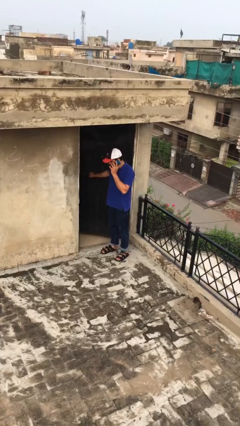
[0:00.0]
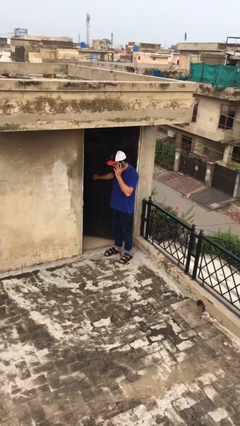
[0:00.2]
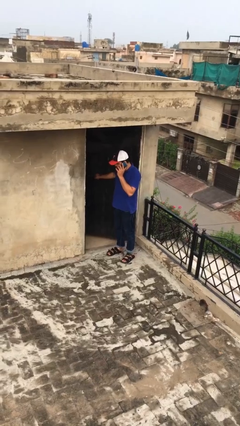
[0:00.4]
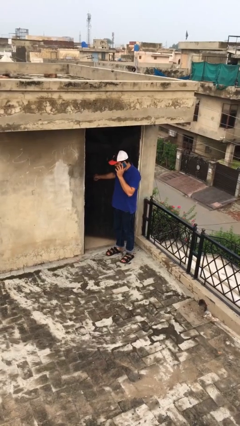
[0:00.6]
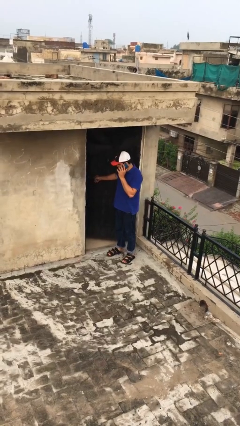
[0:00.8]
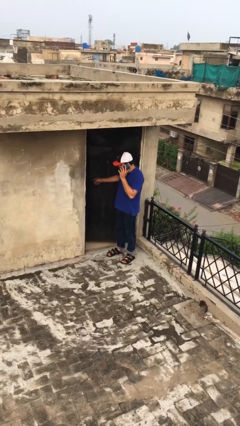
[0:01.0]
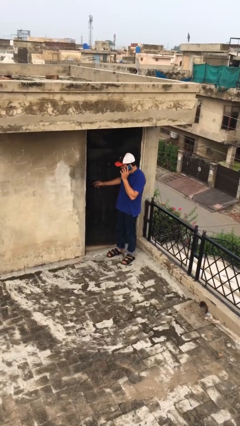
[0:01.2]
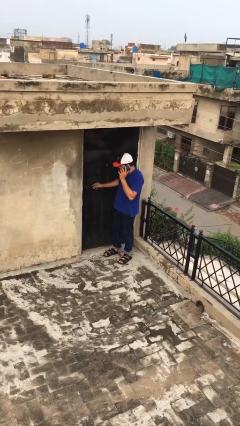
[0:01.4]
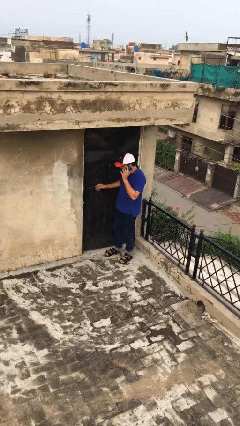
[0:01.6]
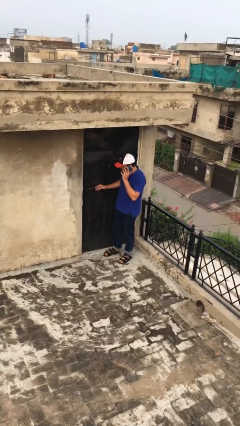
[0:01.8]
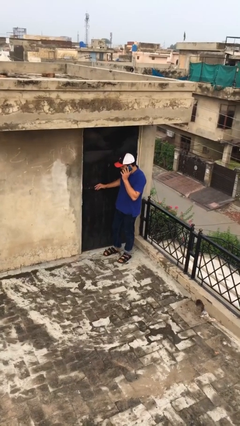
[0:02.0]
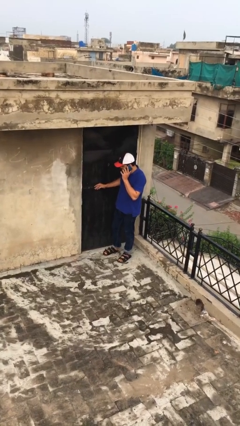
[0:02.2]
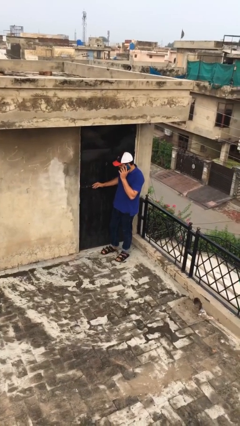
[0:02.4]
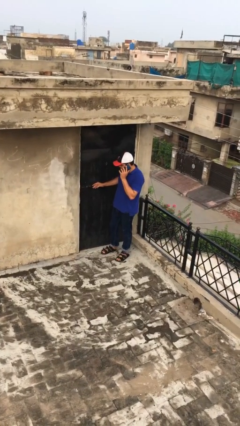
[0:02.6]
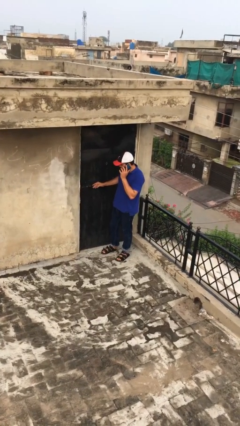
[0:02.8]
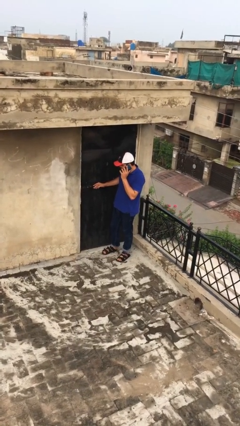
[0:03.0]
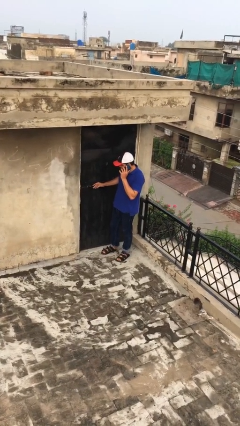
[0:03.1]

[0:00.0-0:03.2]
person closes facility door

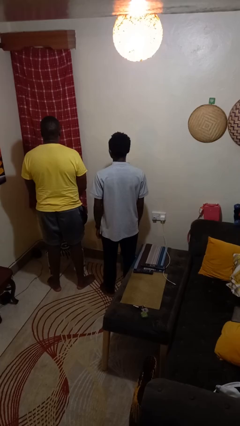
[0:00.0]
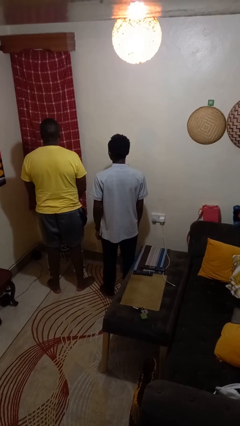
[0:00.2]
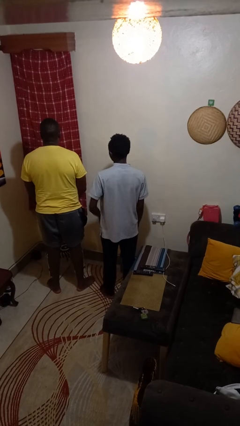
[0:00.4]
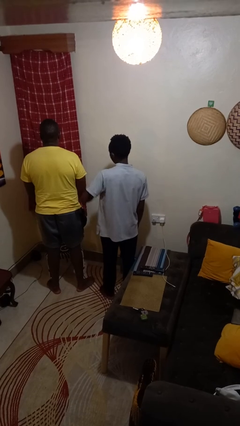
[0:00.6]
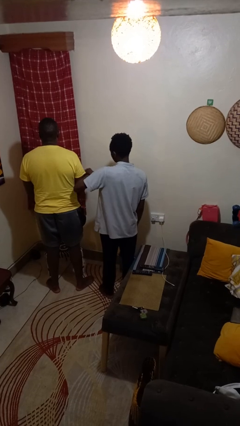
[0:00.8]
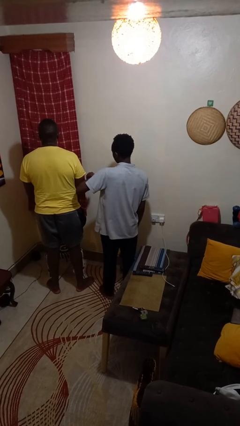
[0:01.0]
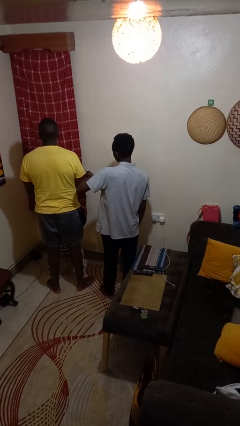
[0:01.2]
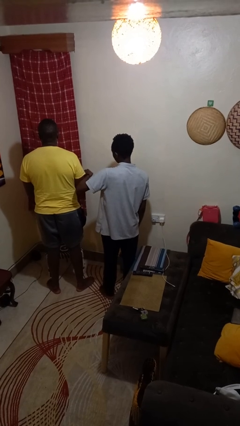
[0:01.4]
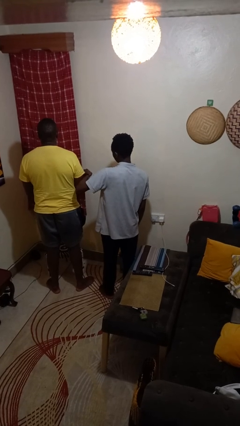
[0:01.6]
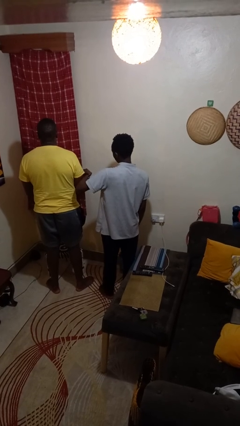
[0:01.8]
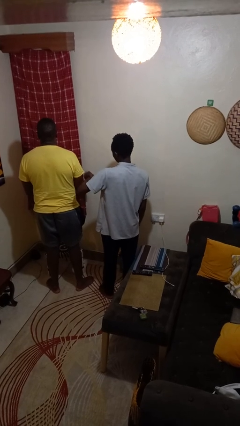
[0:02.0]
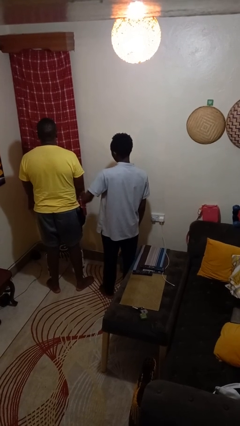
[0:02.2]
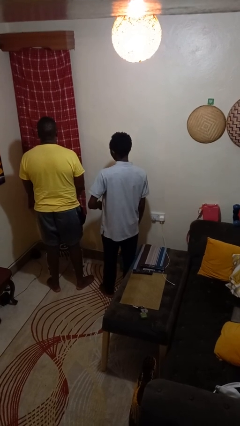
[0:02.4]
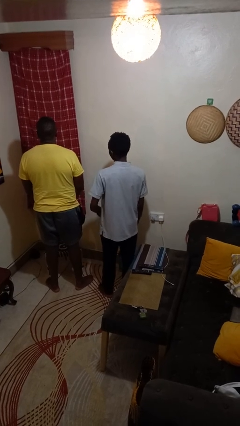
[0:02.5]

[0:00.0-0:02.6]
person nudges person with elbow

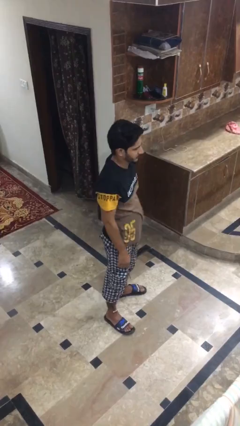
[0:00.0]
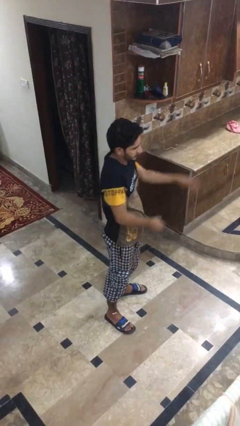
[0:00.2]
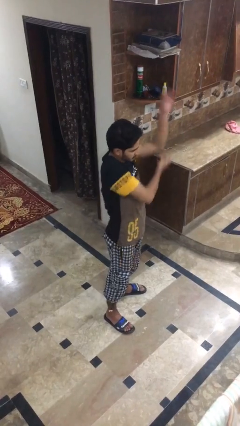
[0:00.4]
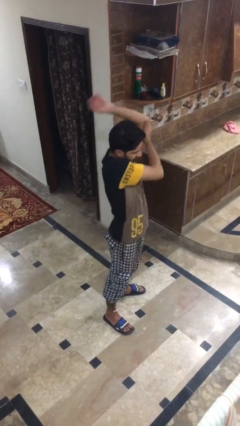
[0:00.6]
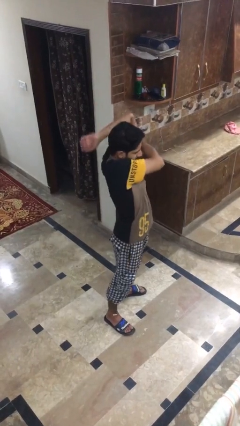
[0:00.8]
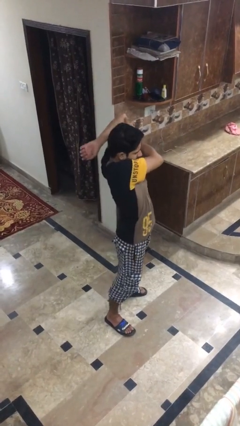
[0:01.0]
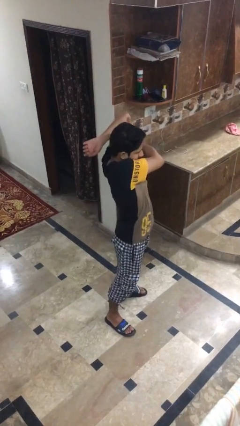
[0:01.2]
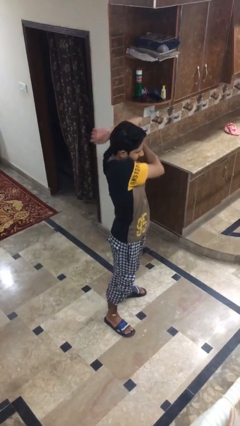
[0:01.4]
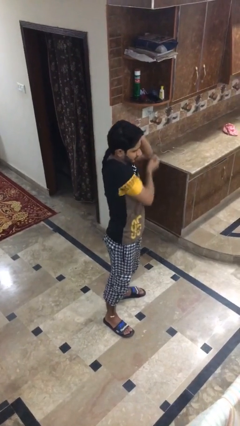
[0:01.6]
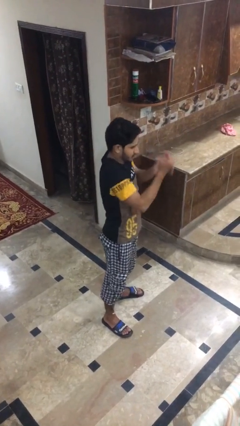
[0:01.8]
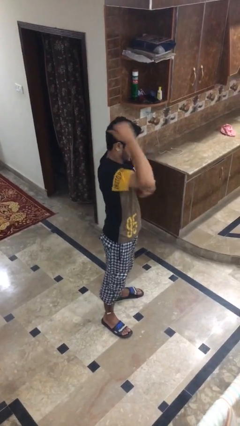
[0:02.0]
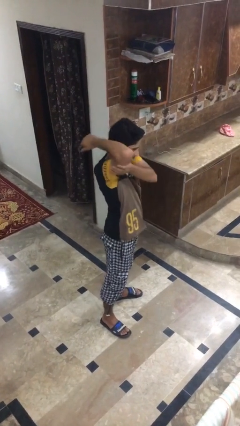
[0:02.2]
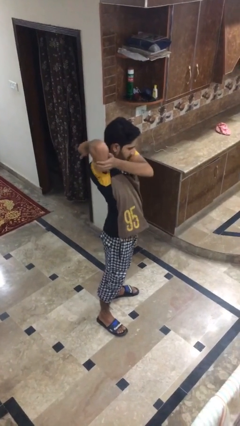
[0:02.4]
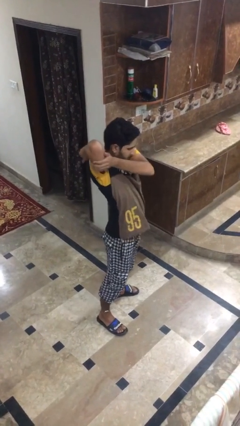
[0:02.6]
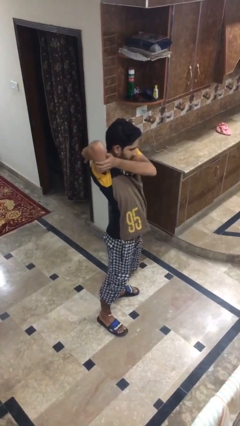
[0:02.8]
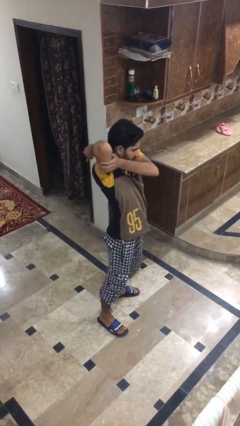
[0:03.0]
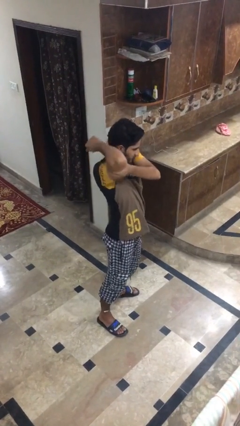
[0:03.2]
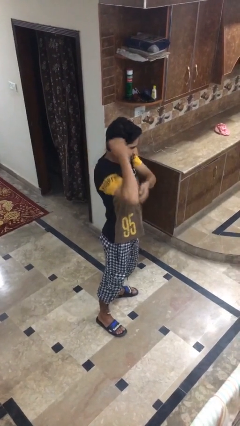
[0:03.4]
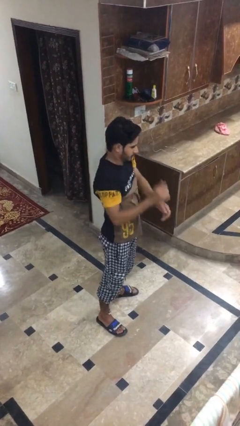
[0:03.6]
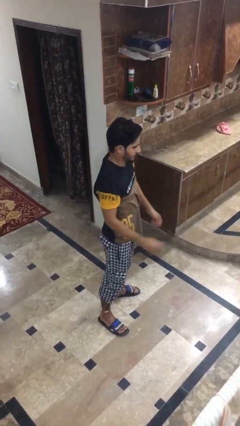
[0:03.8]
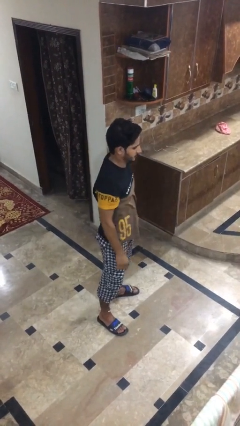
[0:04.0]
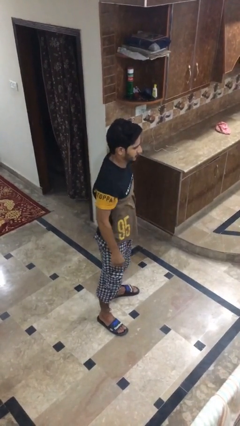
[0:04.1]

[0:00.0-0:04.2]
person stretches arms to side

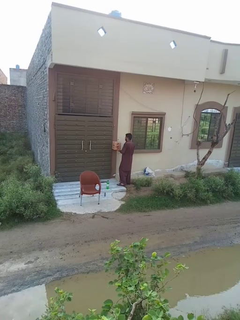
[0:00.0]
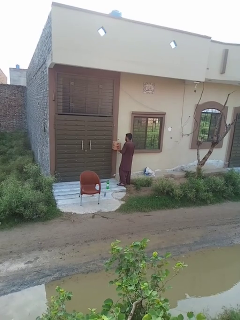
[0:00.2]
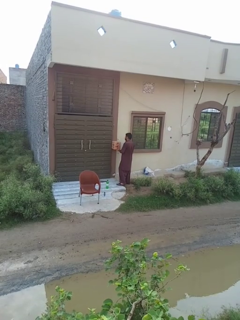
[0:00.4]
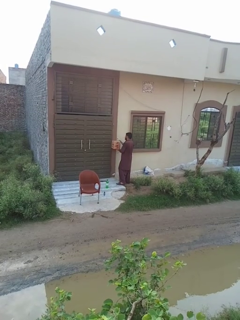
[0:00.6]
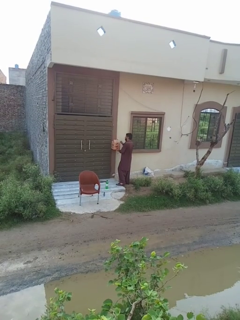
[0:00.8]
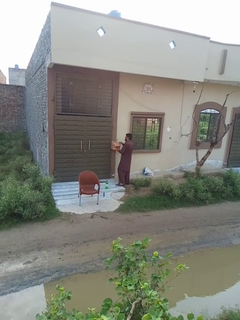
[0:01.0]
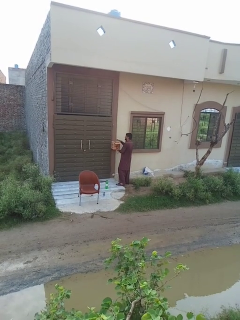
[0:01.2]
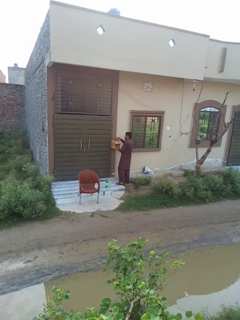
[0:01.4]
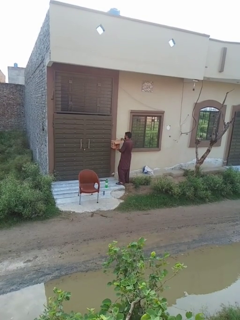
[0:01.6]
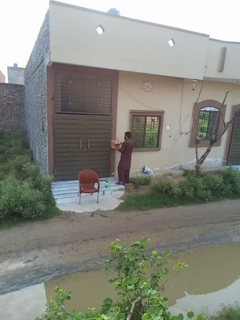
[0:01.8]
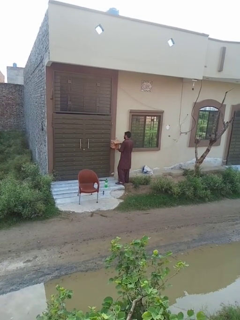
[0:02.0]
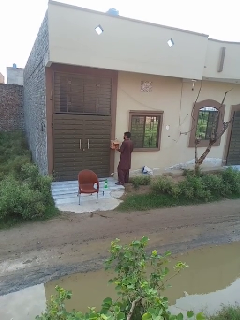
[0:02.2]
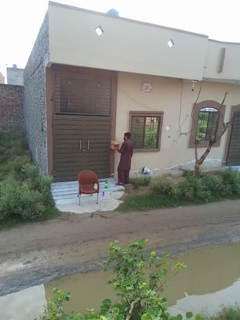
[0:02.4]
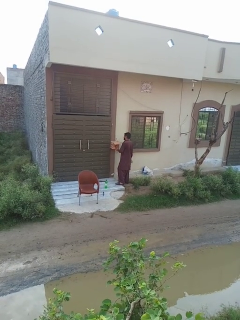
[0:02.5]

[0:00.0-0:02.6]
person opens mailbox

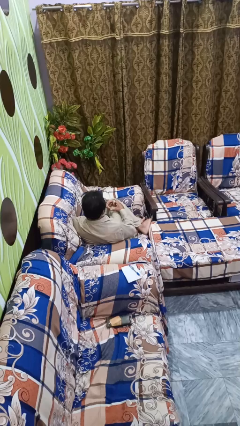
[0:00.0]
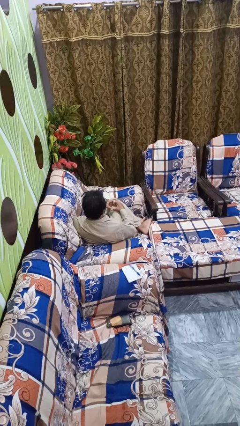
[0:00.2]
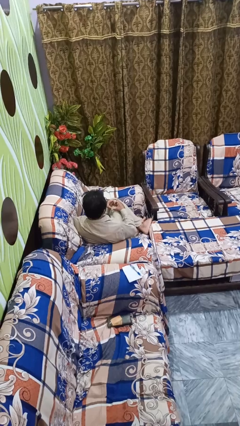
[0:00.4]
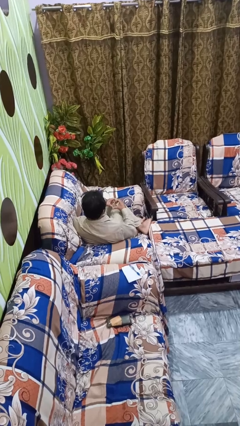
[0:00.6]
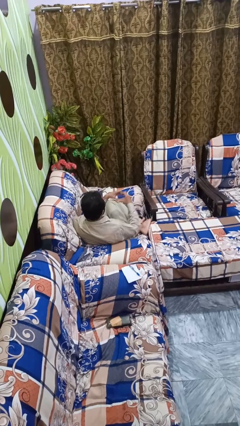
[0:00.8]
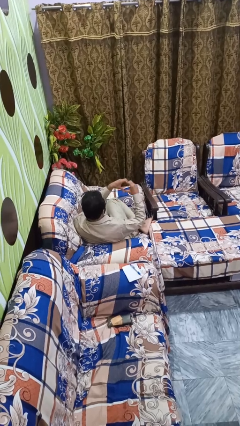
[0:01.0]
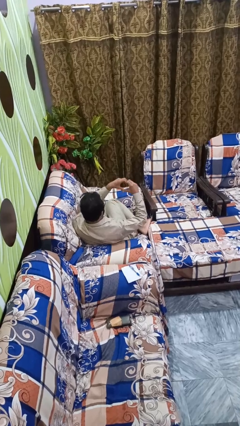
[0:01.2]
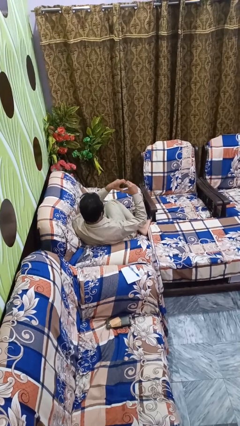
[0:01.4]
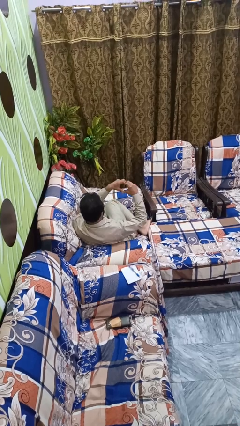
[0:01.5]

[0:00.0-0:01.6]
person gestures heart

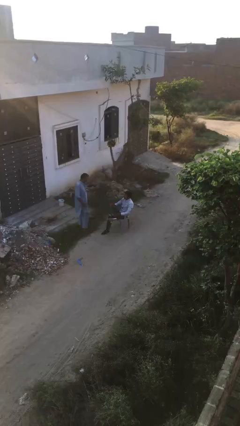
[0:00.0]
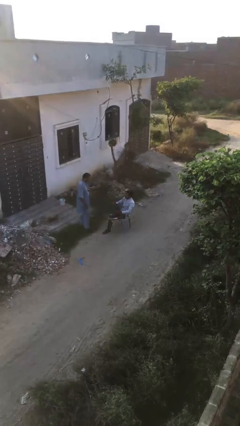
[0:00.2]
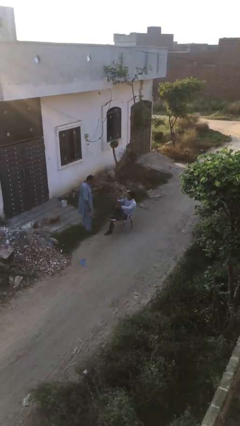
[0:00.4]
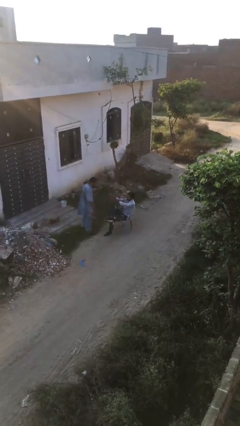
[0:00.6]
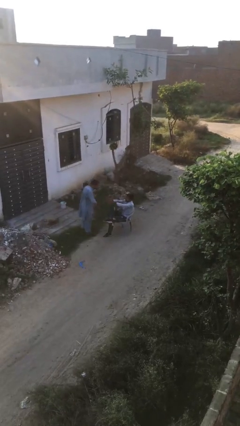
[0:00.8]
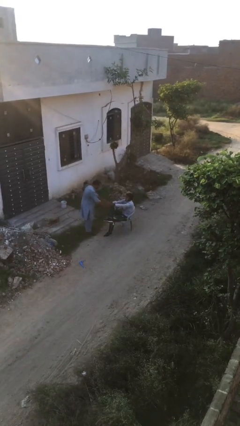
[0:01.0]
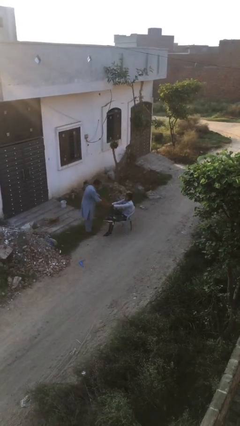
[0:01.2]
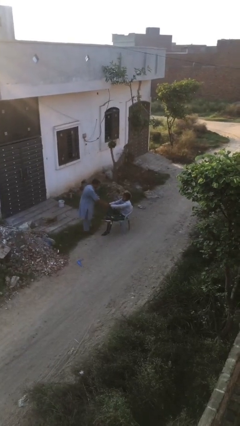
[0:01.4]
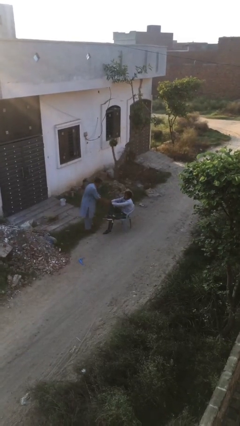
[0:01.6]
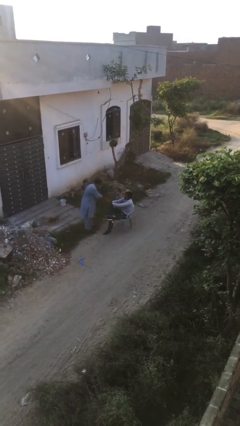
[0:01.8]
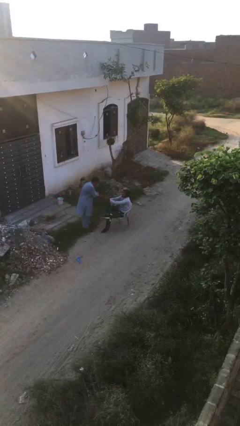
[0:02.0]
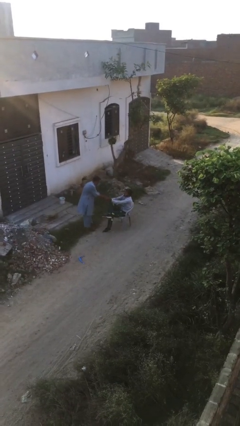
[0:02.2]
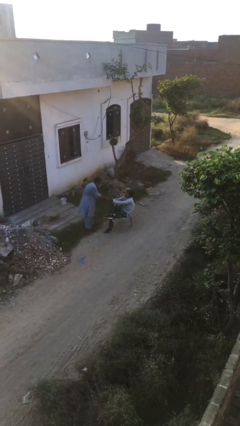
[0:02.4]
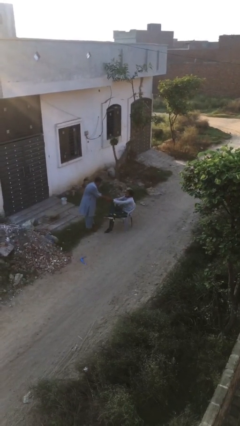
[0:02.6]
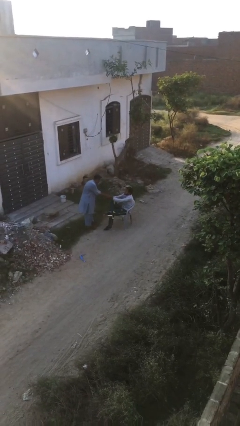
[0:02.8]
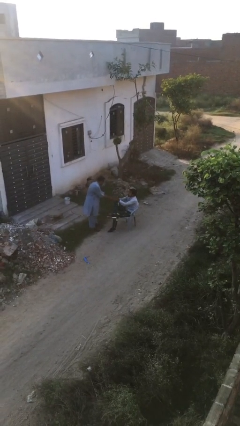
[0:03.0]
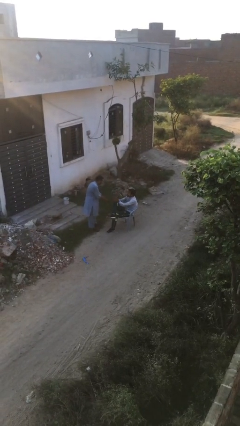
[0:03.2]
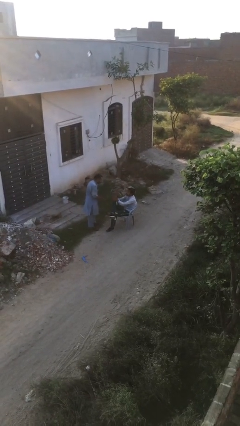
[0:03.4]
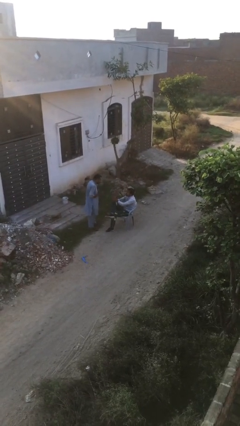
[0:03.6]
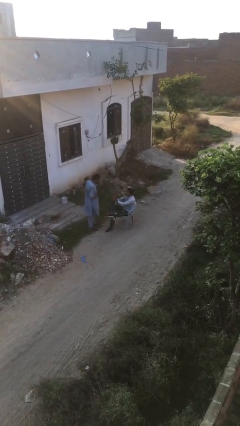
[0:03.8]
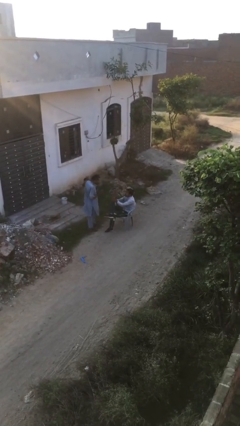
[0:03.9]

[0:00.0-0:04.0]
person shakes hand
